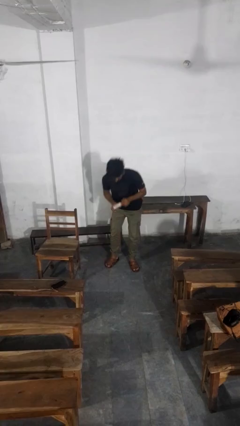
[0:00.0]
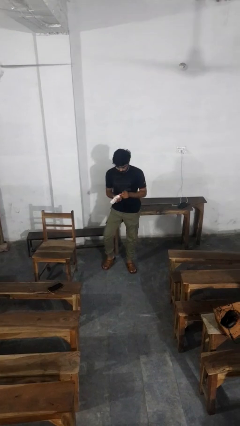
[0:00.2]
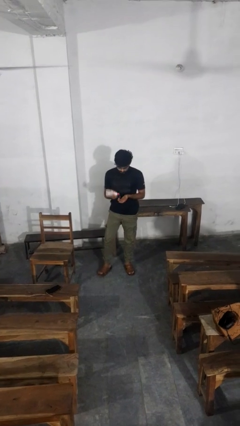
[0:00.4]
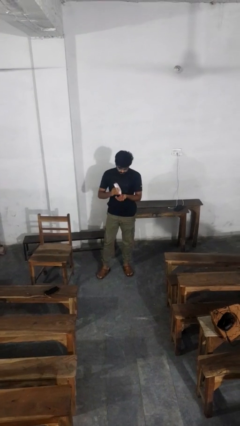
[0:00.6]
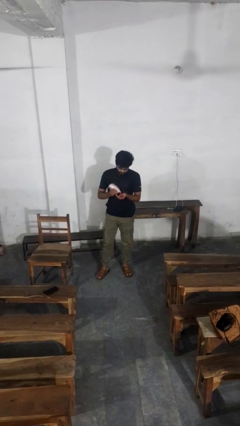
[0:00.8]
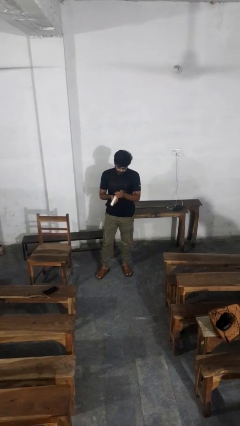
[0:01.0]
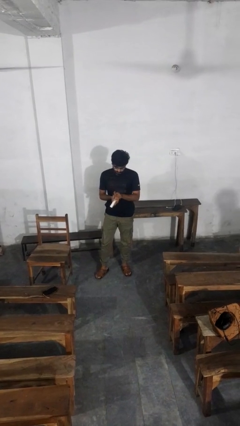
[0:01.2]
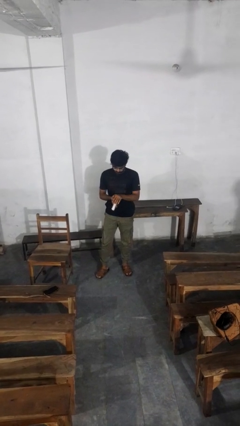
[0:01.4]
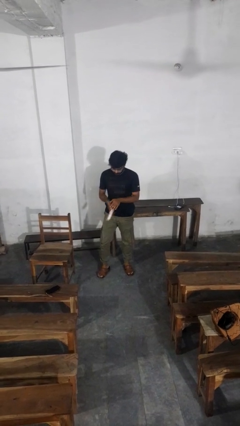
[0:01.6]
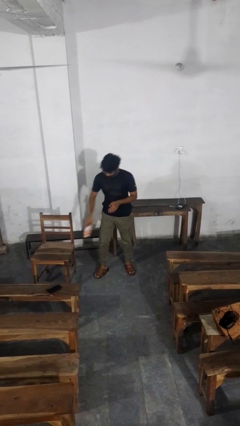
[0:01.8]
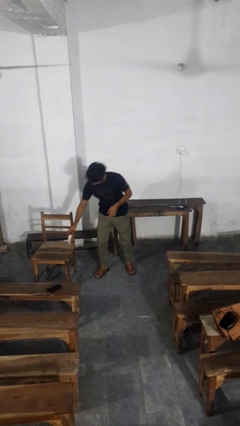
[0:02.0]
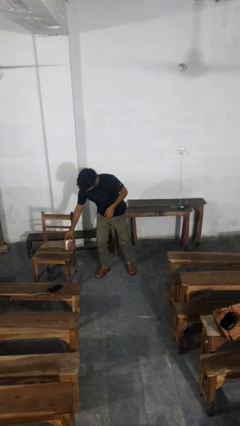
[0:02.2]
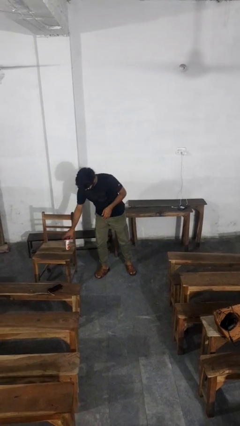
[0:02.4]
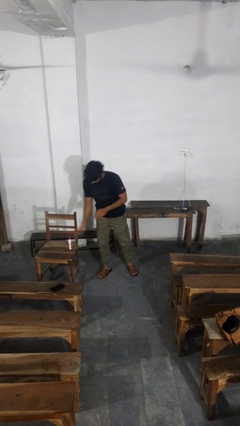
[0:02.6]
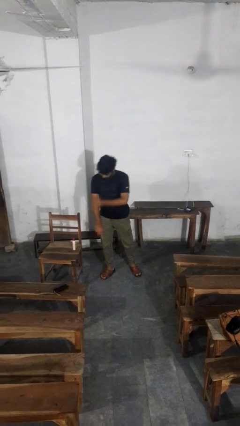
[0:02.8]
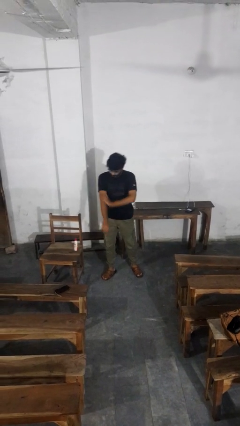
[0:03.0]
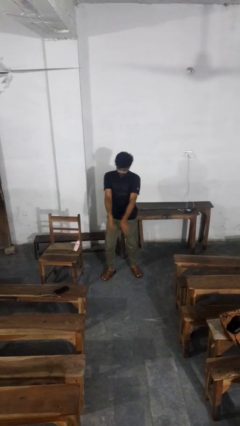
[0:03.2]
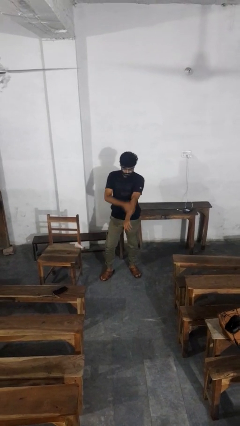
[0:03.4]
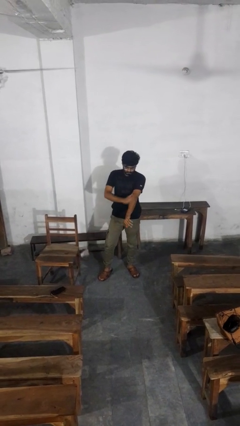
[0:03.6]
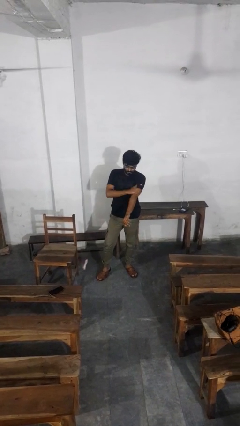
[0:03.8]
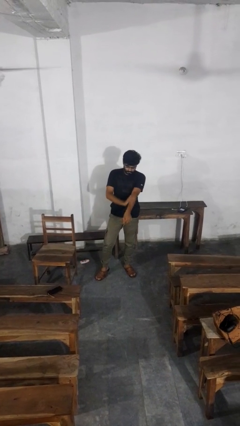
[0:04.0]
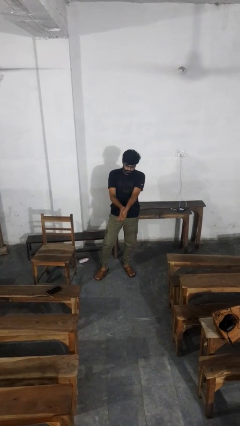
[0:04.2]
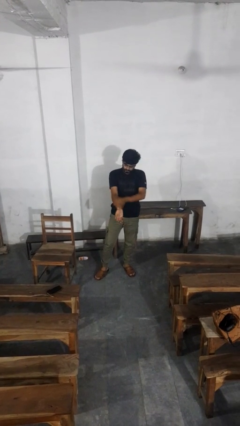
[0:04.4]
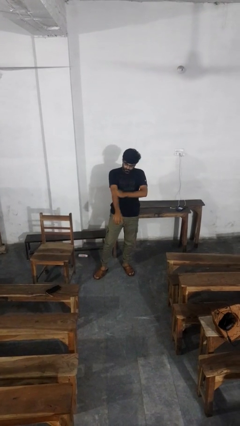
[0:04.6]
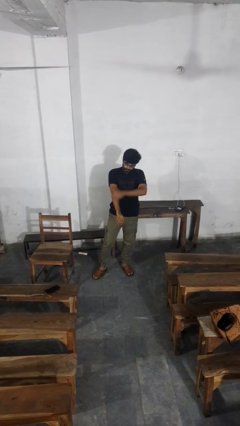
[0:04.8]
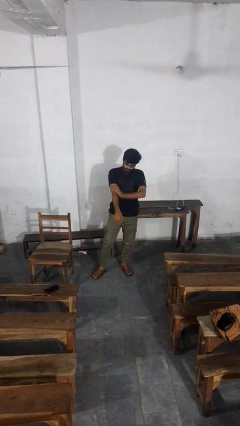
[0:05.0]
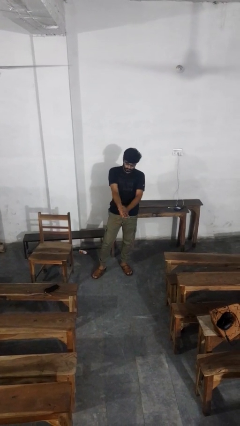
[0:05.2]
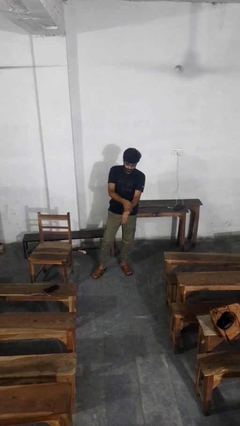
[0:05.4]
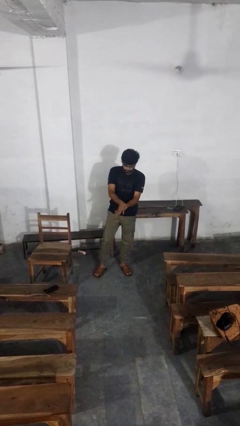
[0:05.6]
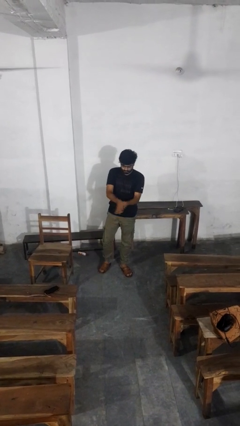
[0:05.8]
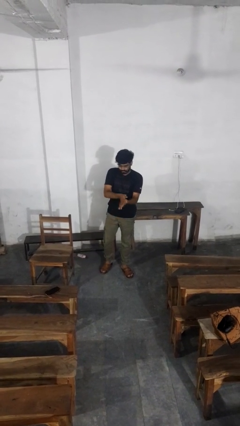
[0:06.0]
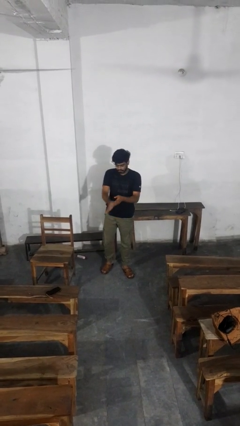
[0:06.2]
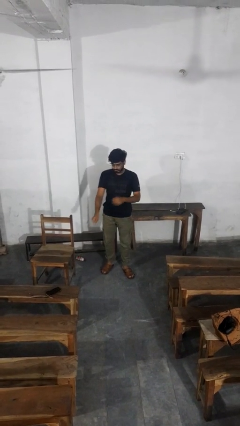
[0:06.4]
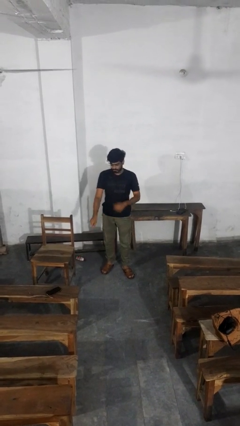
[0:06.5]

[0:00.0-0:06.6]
person applies sunscreen

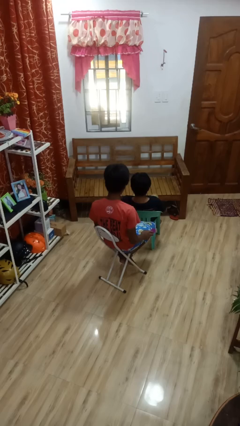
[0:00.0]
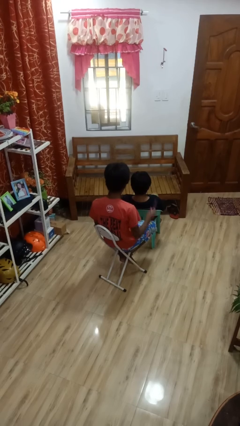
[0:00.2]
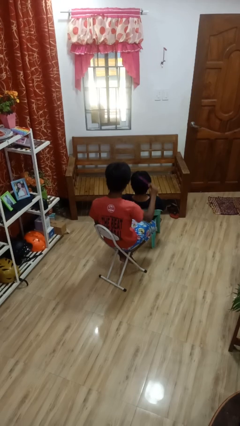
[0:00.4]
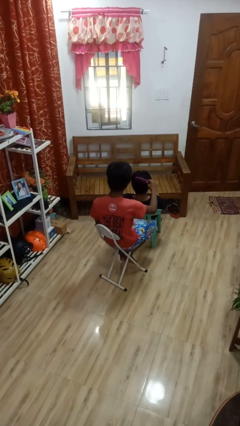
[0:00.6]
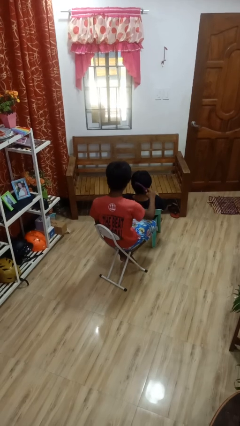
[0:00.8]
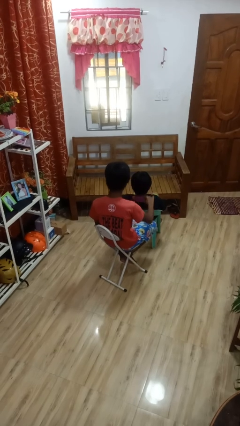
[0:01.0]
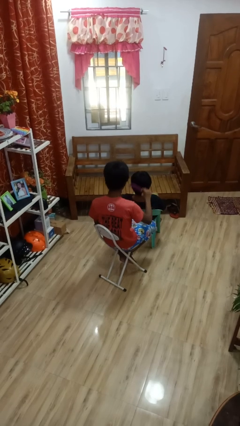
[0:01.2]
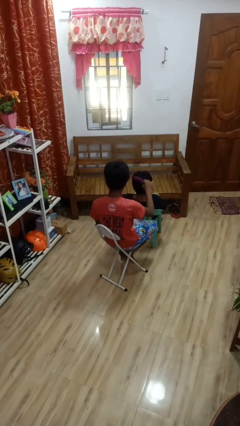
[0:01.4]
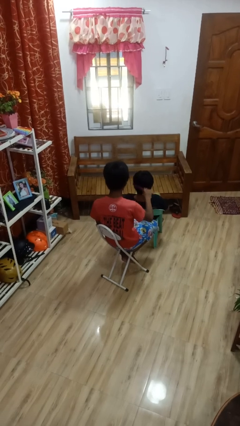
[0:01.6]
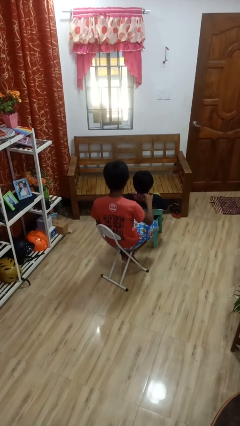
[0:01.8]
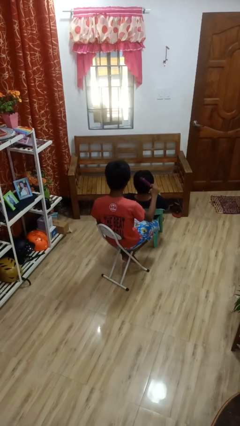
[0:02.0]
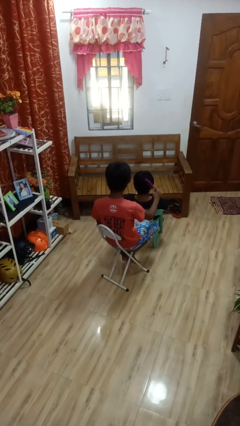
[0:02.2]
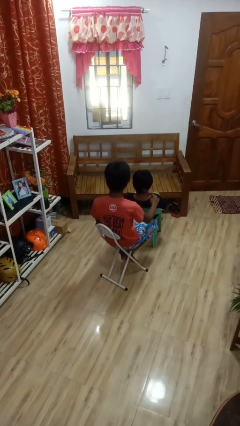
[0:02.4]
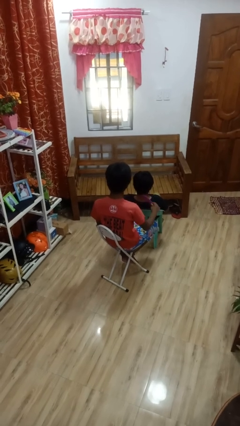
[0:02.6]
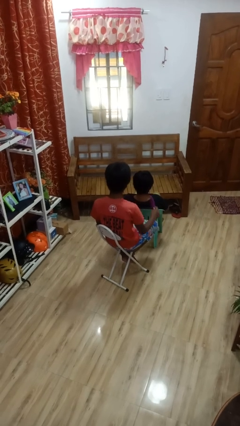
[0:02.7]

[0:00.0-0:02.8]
person brushes hair of person

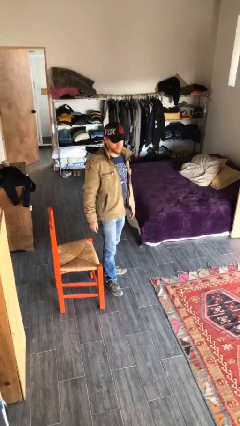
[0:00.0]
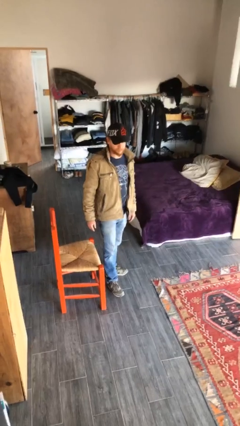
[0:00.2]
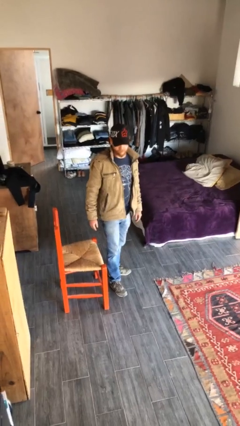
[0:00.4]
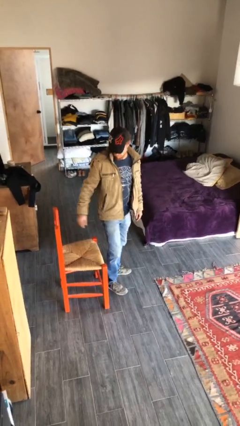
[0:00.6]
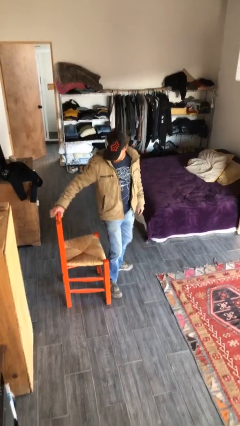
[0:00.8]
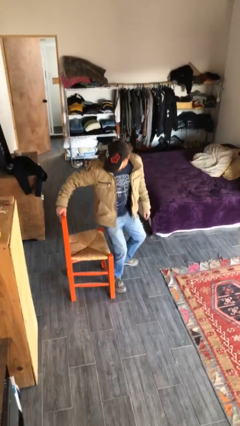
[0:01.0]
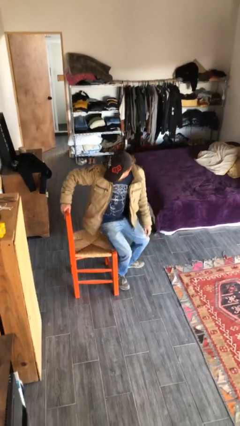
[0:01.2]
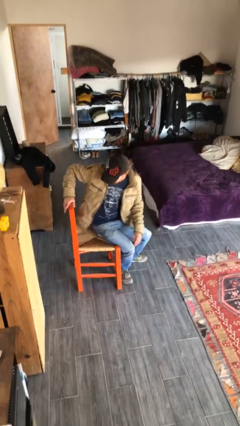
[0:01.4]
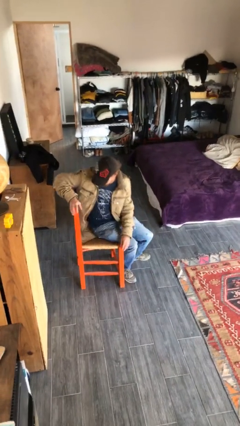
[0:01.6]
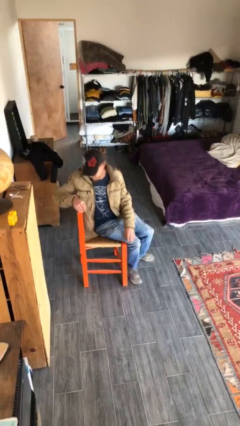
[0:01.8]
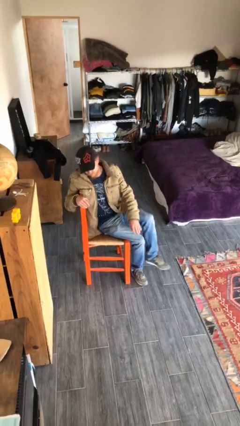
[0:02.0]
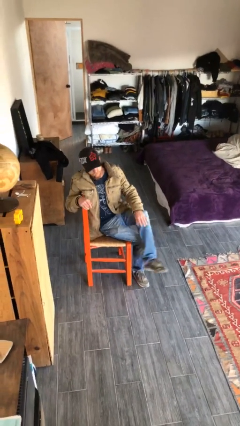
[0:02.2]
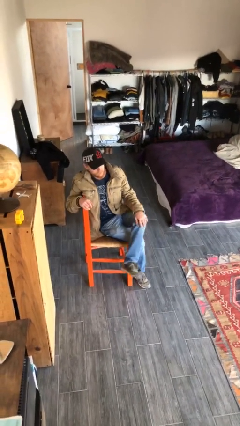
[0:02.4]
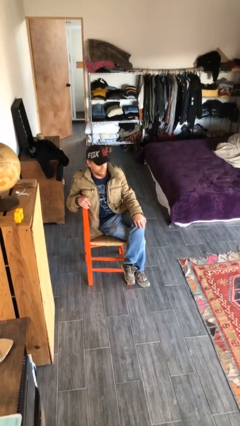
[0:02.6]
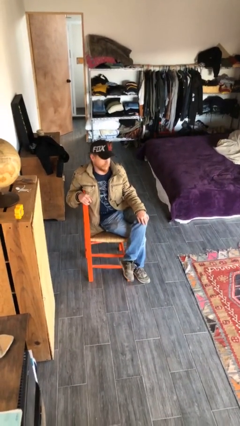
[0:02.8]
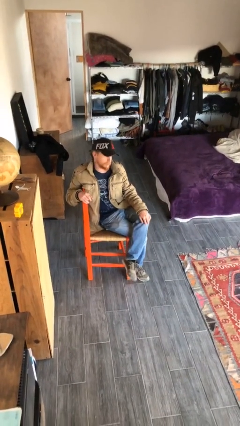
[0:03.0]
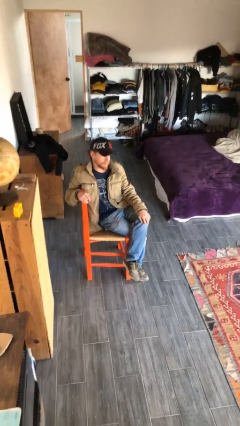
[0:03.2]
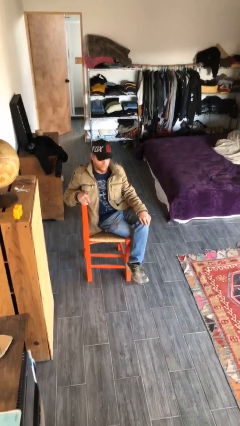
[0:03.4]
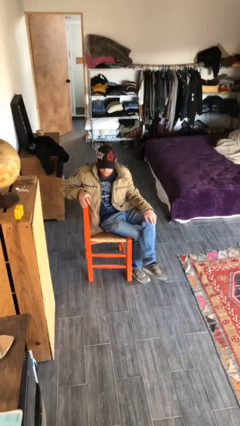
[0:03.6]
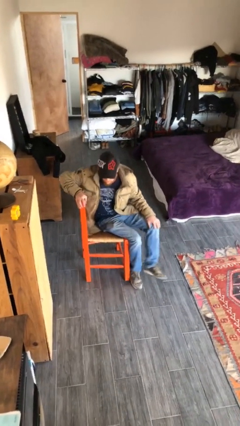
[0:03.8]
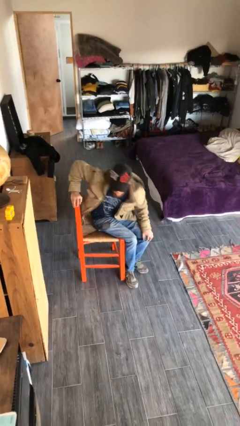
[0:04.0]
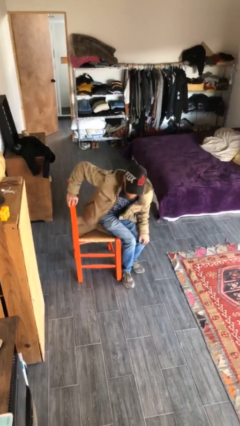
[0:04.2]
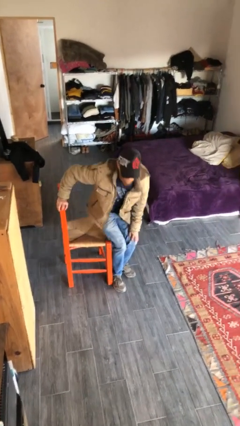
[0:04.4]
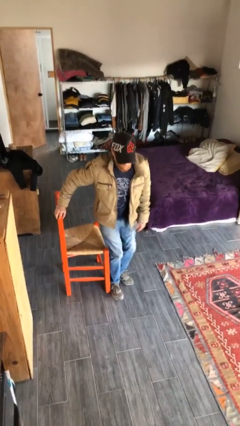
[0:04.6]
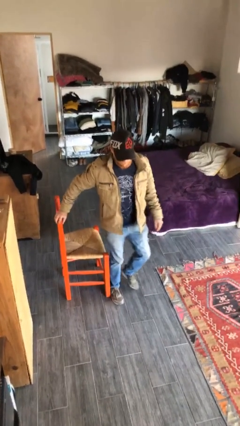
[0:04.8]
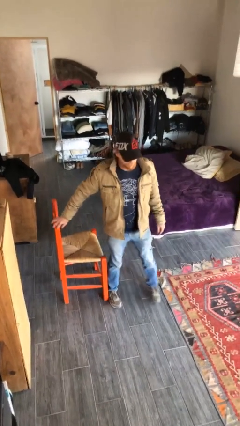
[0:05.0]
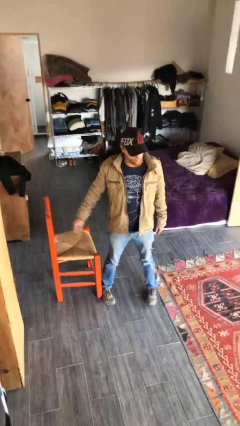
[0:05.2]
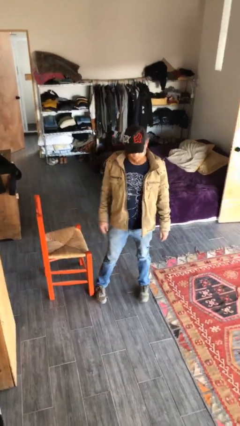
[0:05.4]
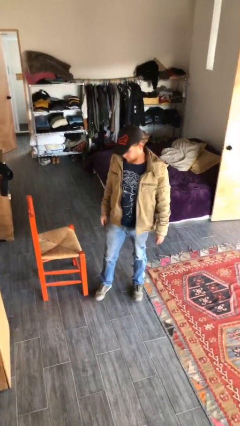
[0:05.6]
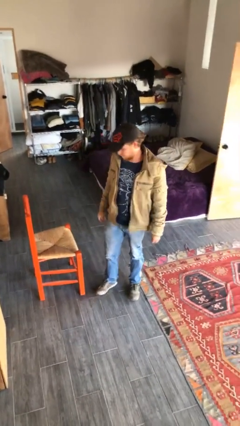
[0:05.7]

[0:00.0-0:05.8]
person sits down

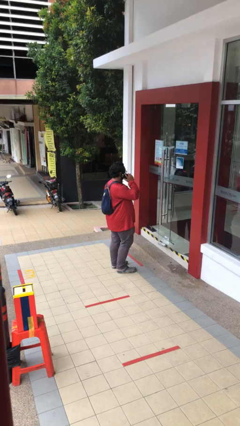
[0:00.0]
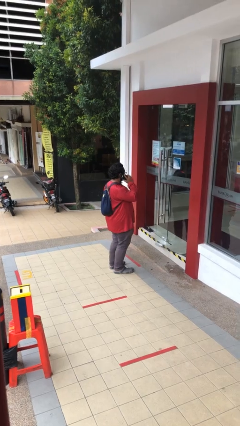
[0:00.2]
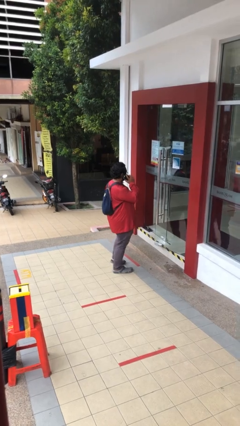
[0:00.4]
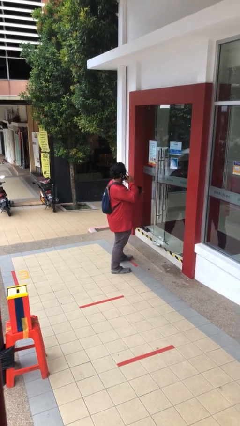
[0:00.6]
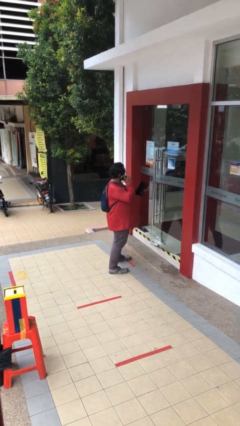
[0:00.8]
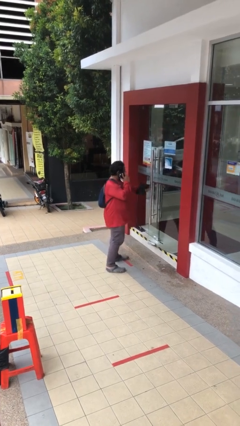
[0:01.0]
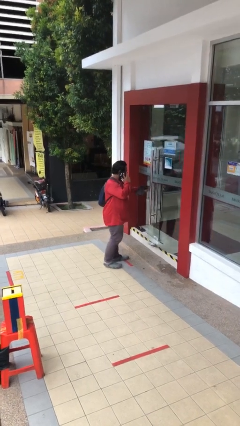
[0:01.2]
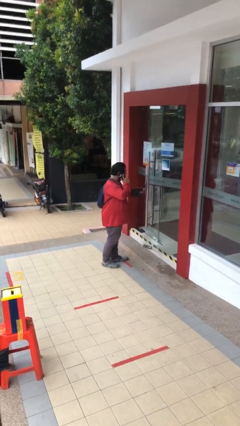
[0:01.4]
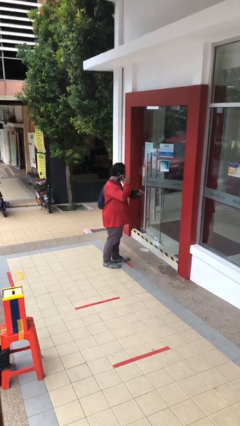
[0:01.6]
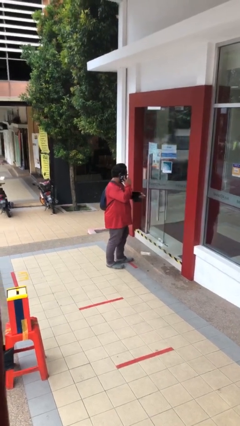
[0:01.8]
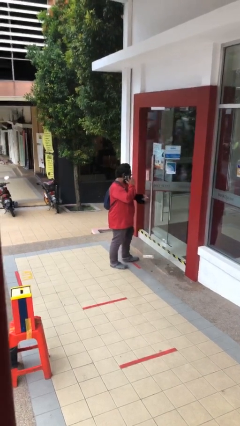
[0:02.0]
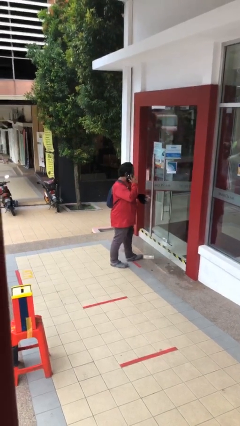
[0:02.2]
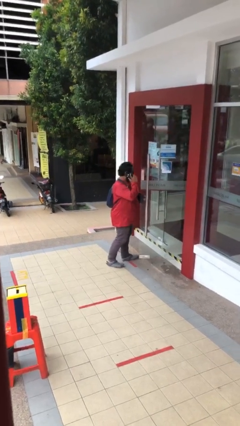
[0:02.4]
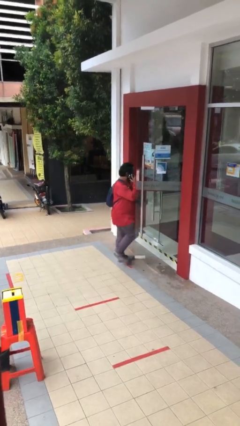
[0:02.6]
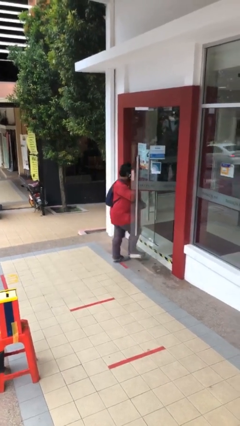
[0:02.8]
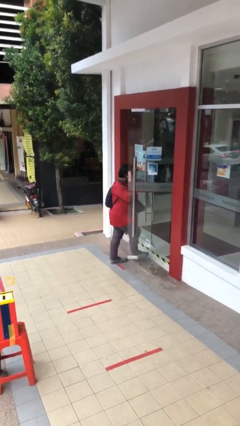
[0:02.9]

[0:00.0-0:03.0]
person opens facility door
